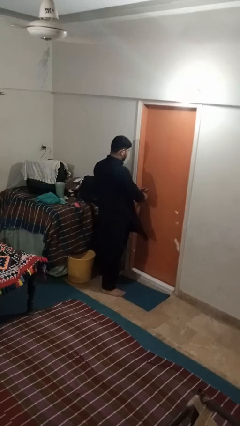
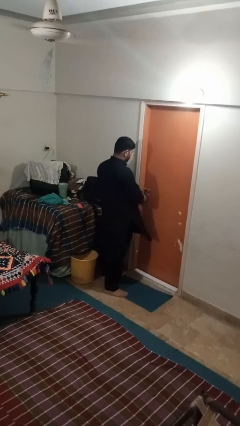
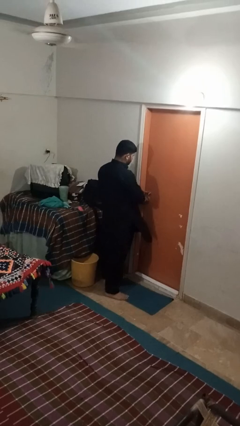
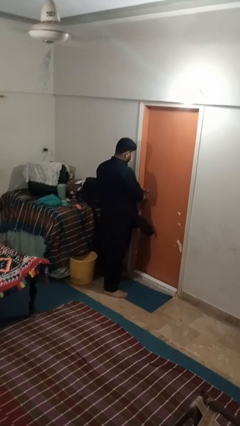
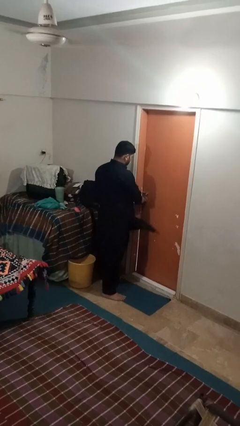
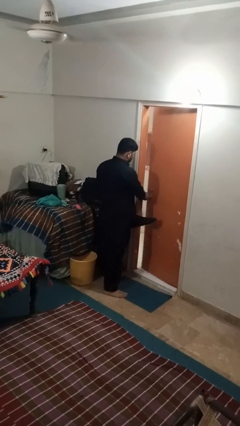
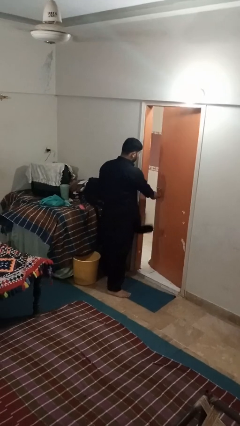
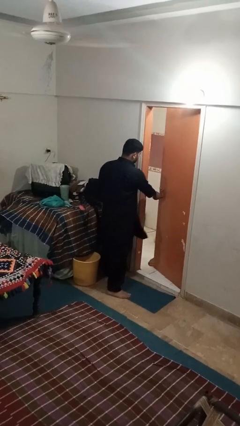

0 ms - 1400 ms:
person opens facility door

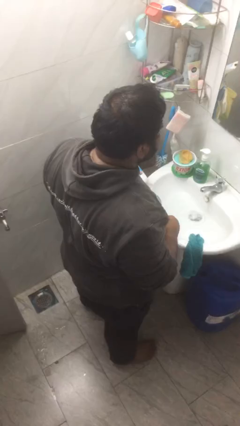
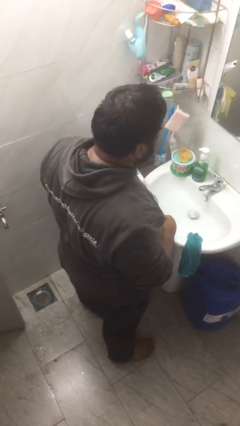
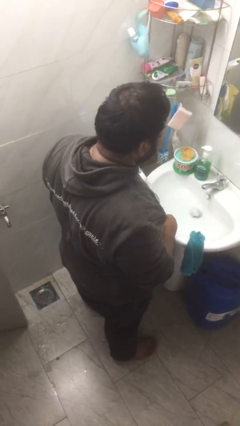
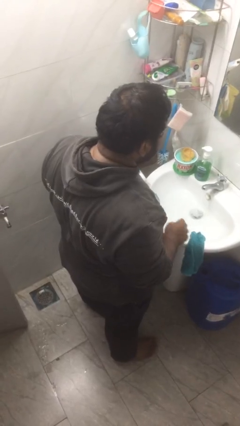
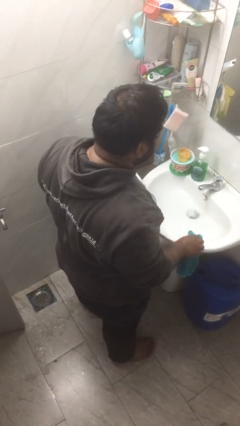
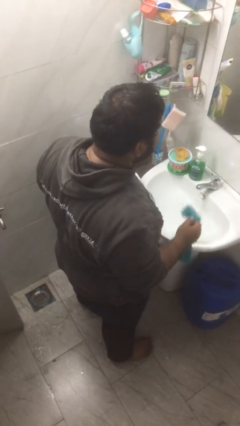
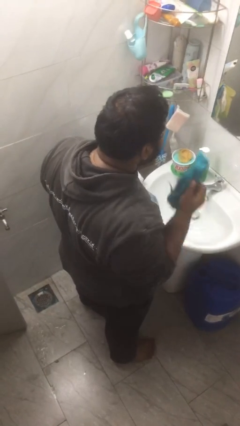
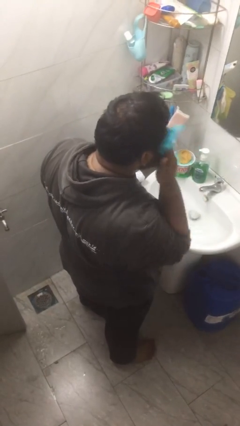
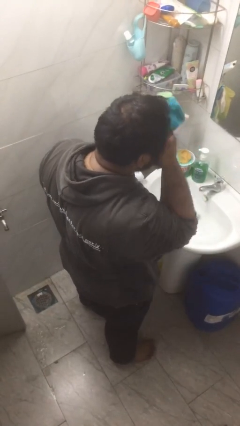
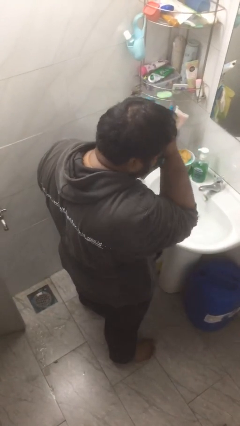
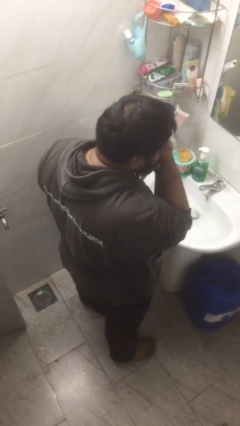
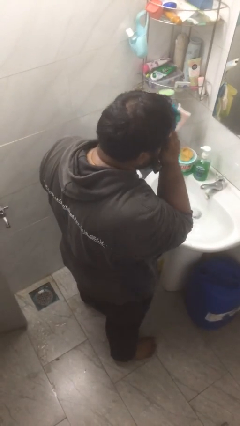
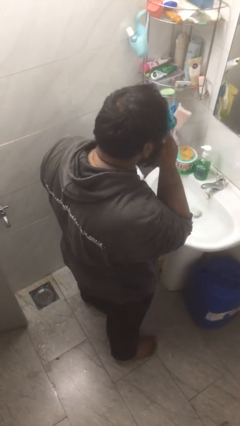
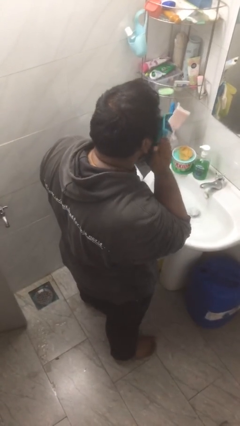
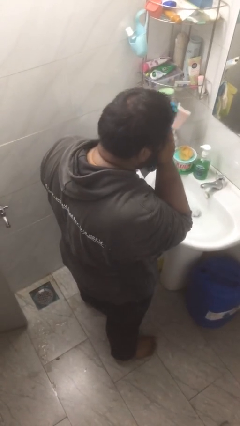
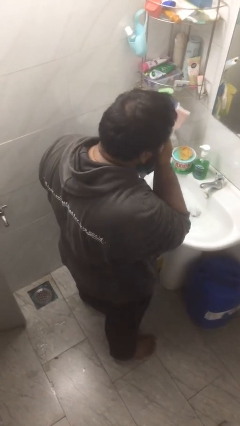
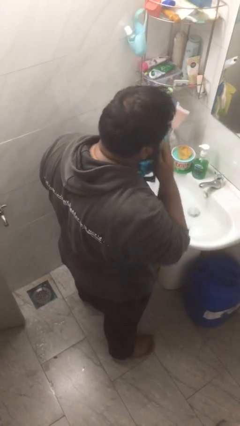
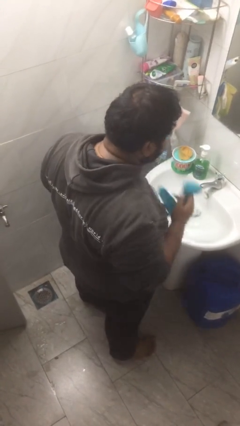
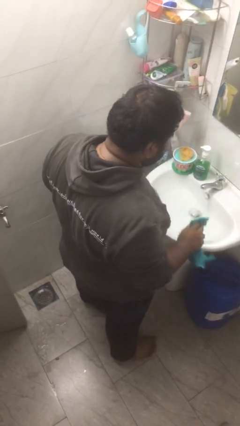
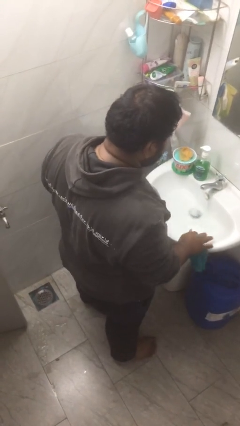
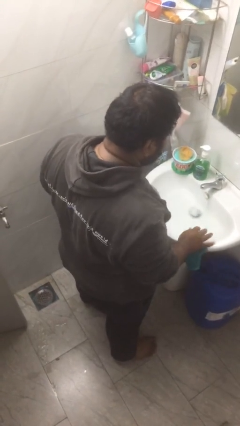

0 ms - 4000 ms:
person dries face with towel

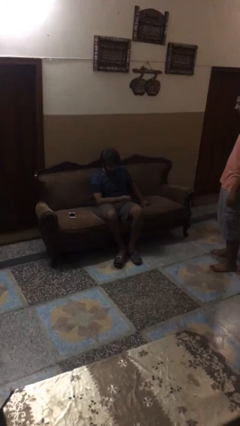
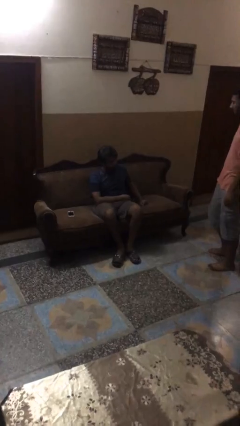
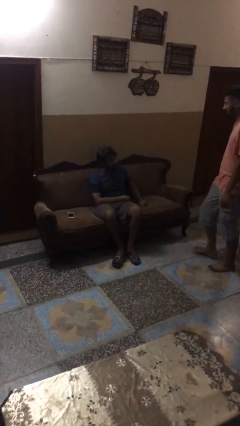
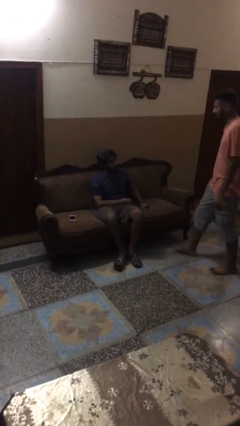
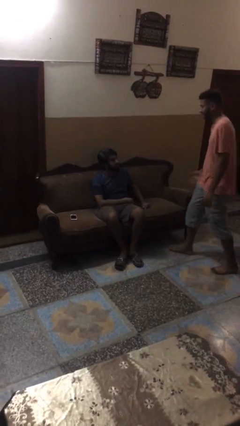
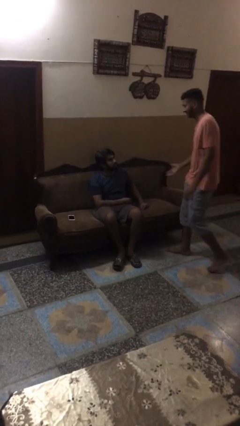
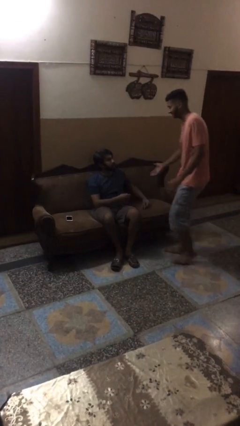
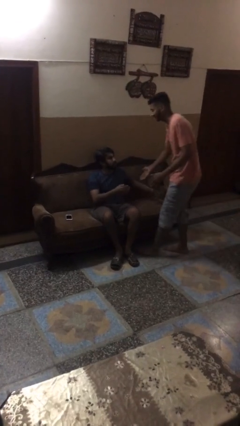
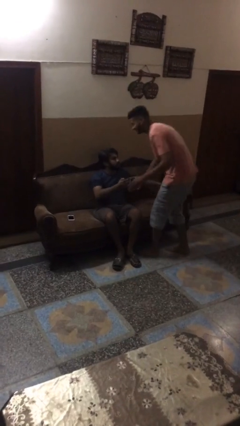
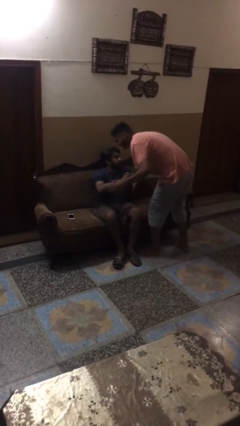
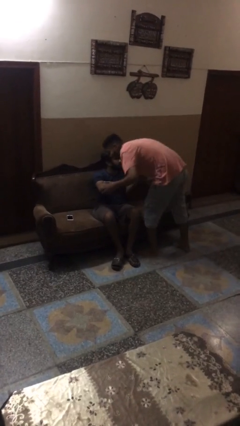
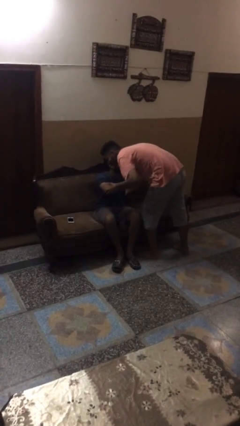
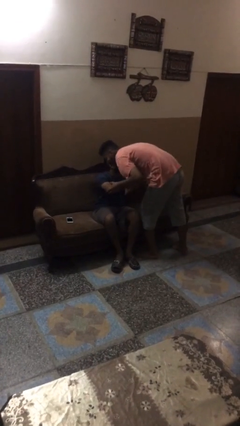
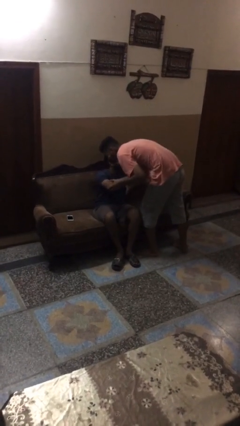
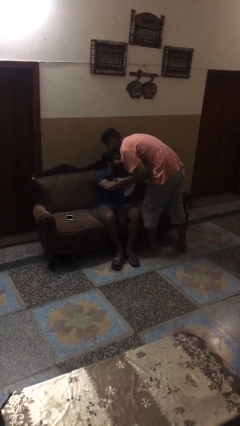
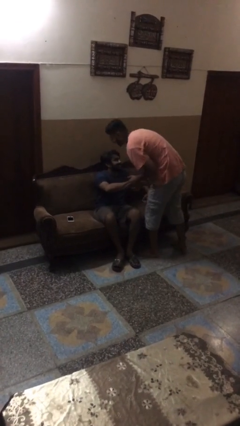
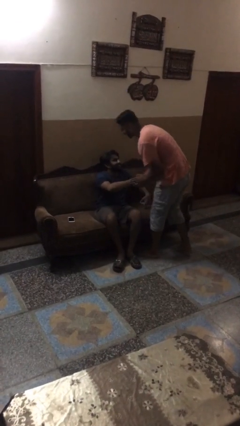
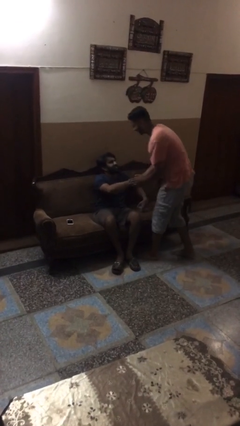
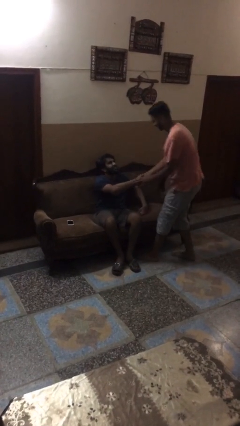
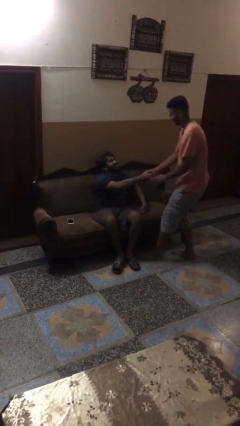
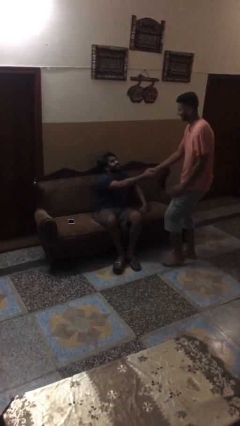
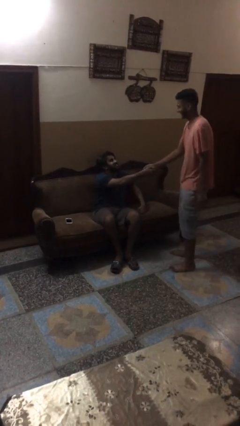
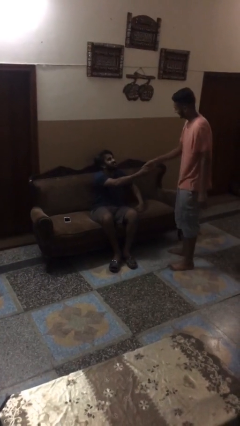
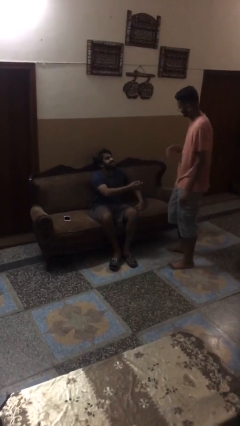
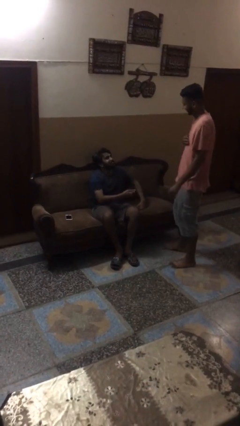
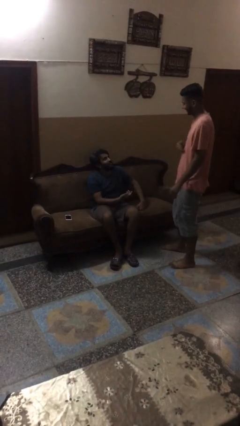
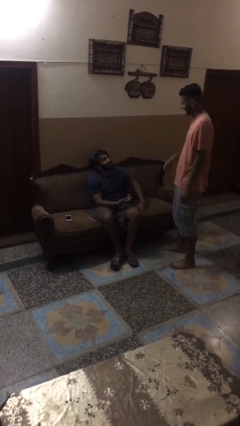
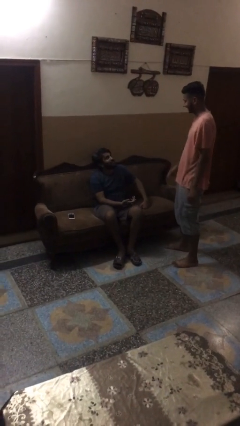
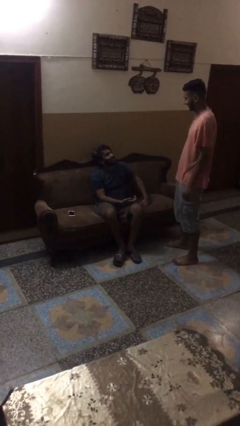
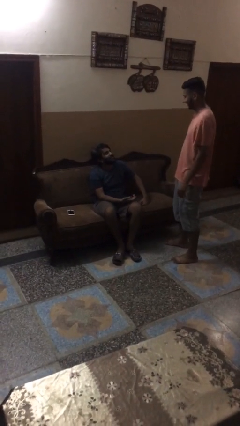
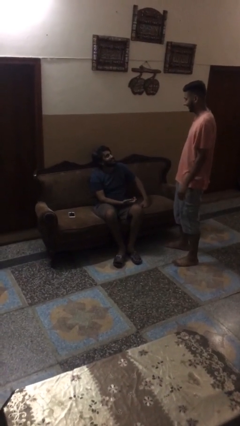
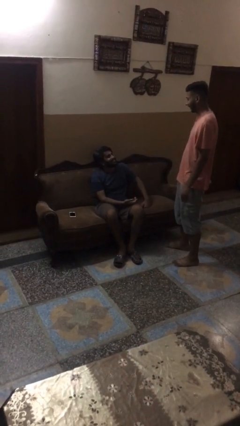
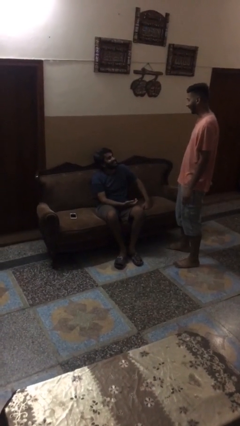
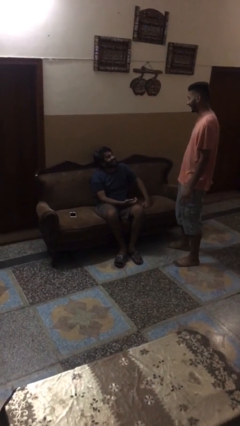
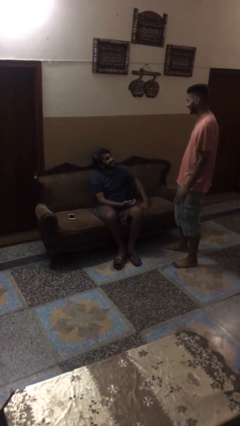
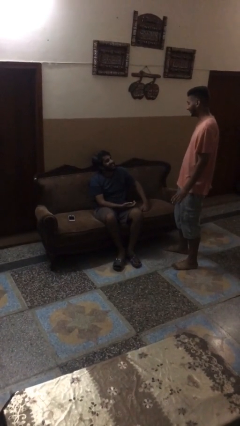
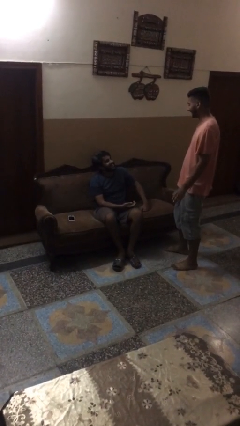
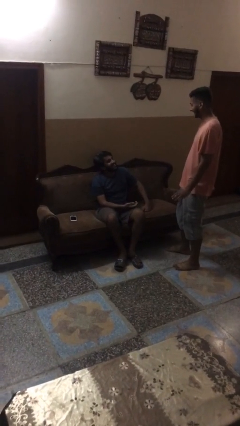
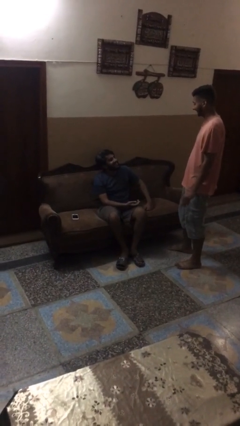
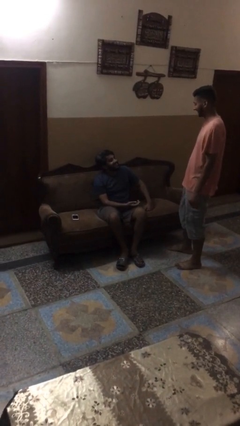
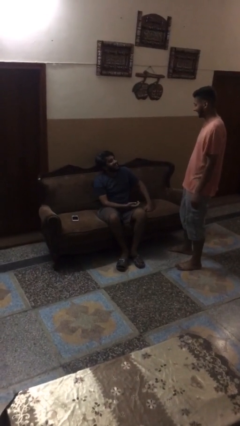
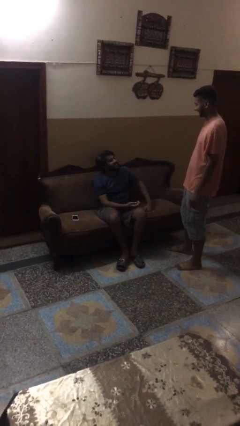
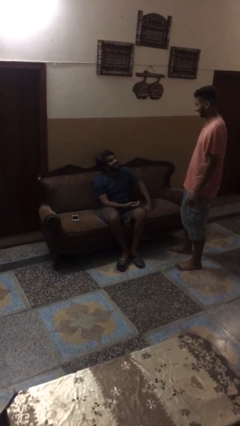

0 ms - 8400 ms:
person embraces person

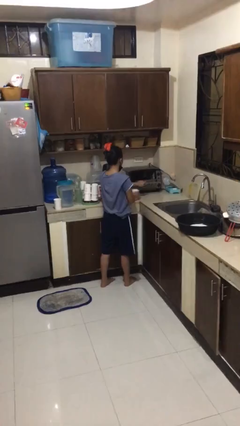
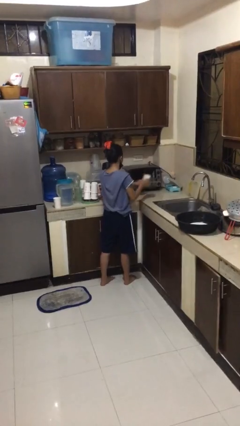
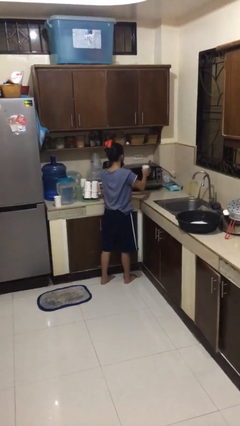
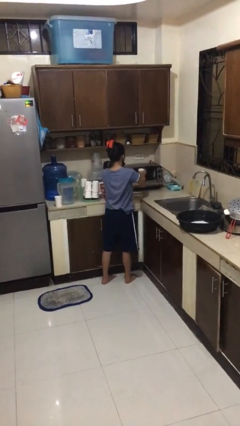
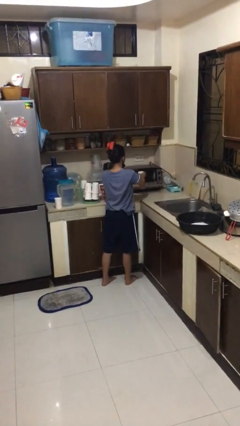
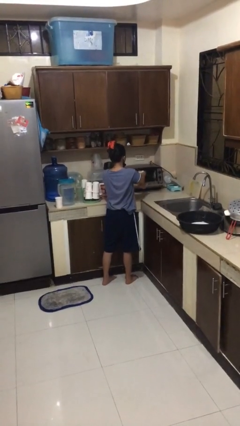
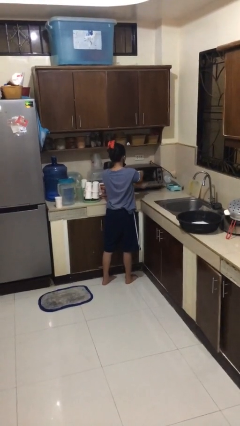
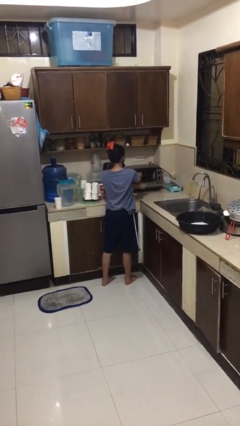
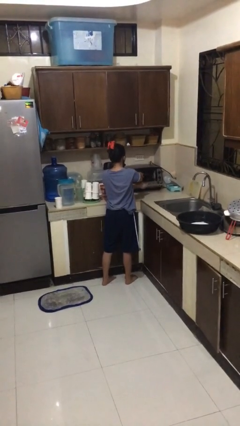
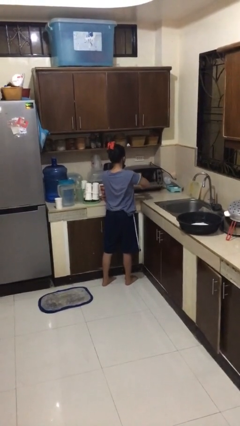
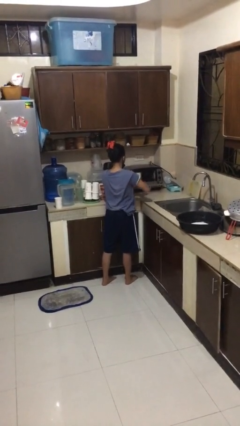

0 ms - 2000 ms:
person puts object into microwave

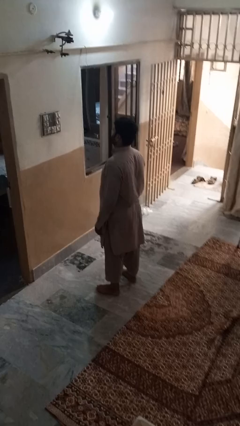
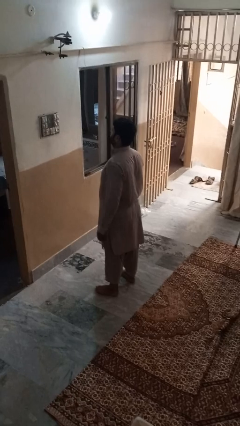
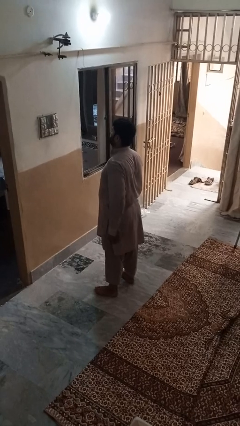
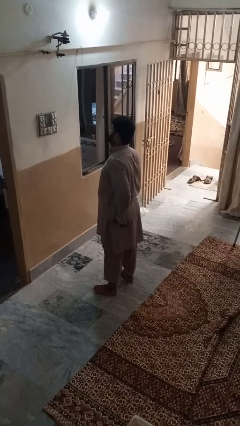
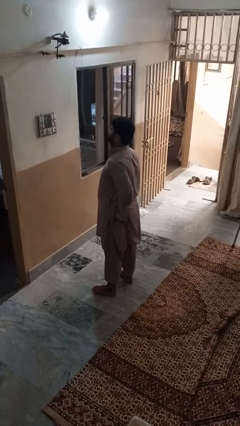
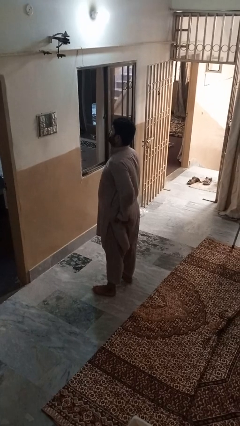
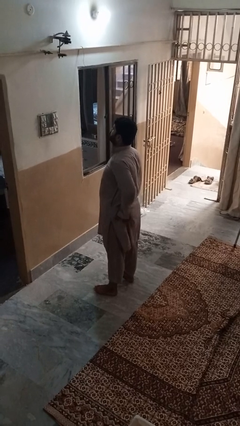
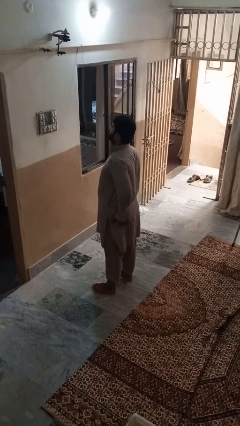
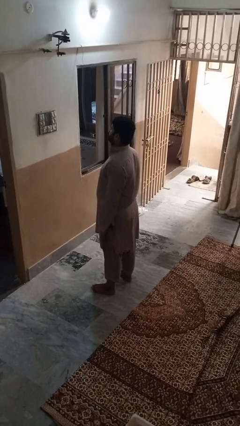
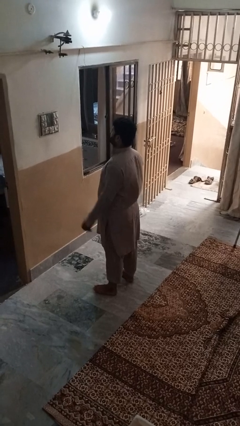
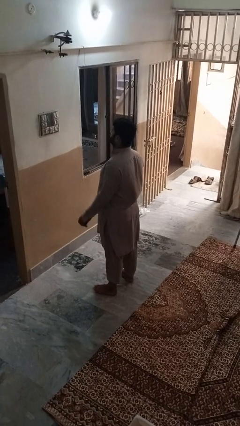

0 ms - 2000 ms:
person wiggles hips

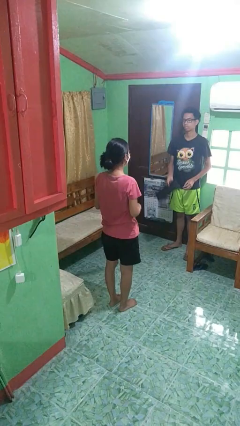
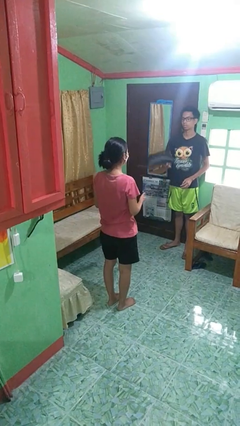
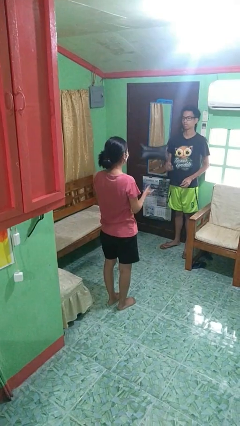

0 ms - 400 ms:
person catches object from person
